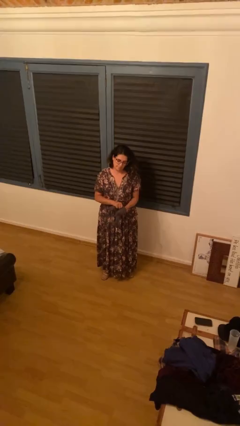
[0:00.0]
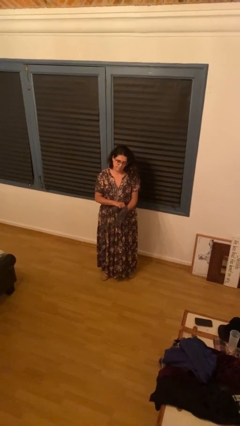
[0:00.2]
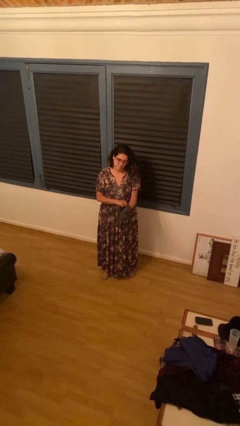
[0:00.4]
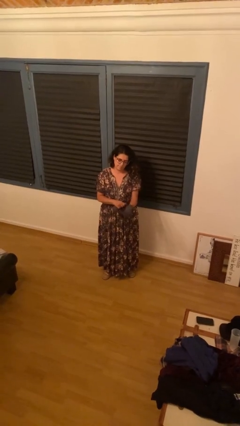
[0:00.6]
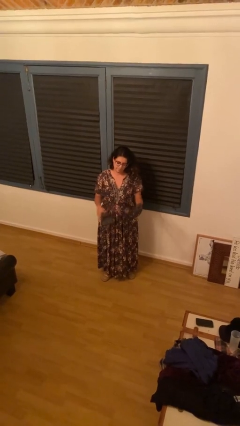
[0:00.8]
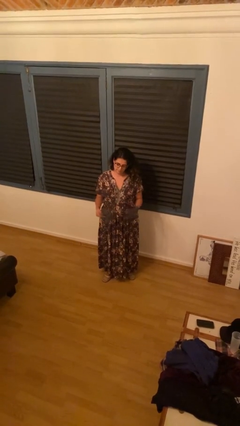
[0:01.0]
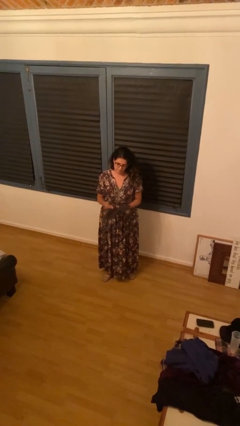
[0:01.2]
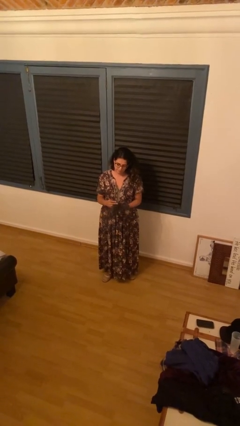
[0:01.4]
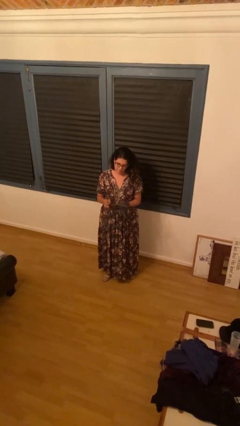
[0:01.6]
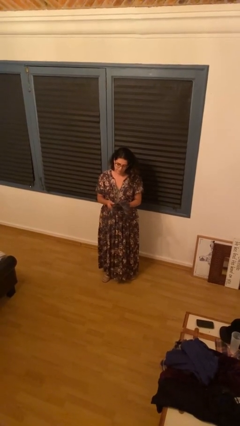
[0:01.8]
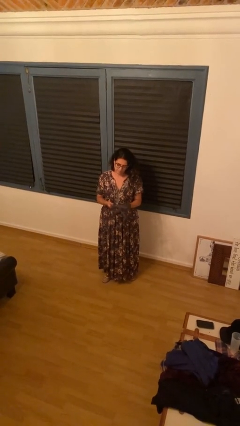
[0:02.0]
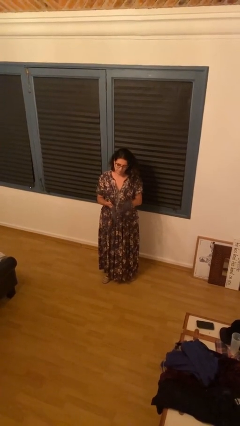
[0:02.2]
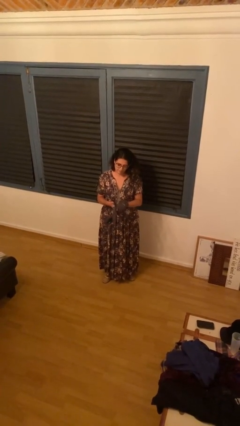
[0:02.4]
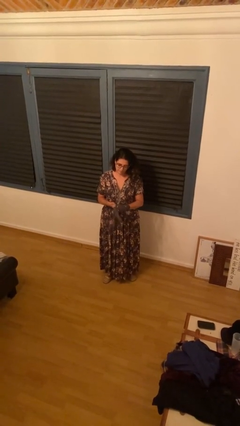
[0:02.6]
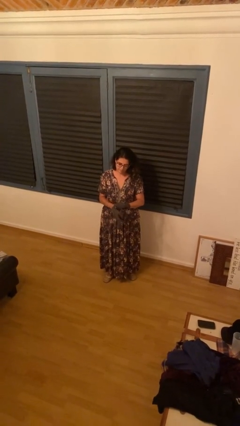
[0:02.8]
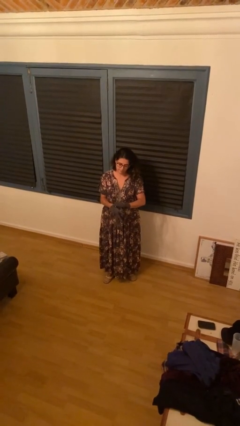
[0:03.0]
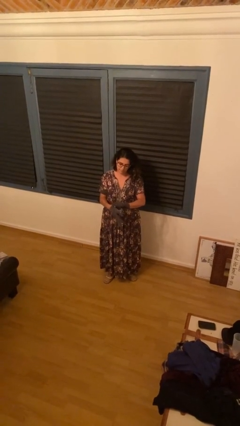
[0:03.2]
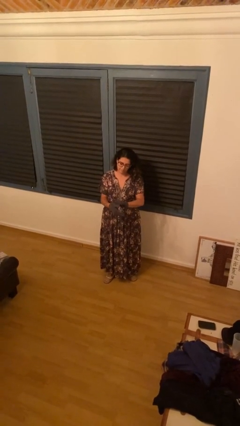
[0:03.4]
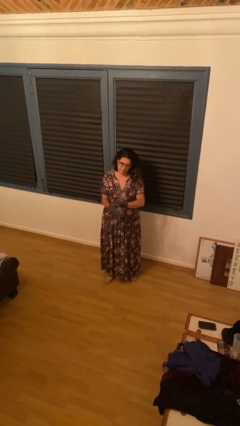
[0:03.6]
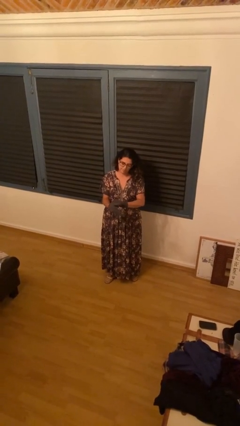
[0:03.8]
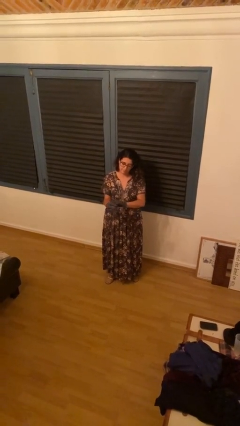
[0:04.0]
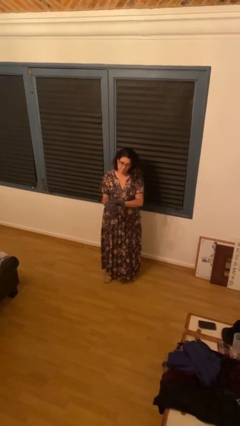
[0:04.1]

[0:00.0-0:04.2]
person puts on gloves

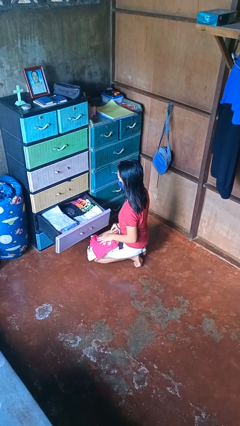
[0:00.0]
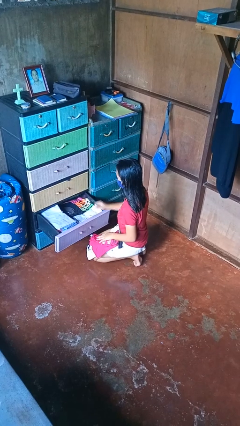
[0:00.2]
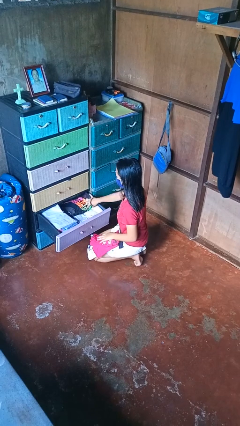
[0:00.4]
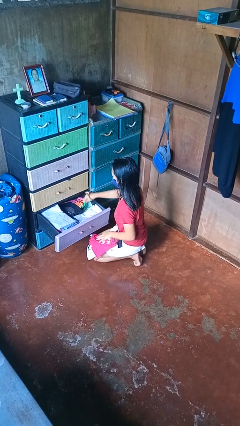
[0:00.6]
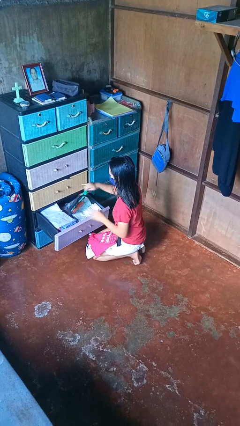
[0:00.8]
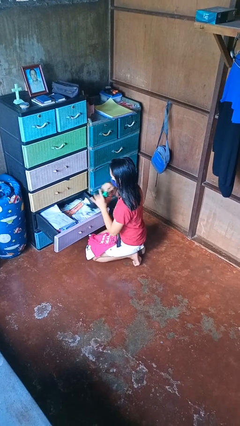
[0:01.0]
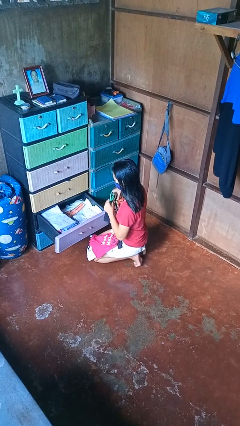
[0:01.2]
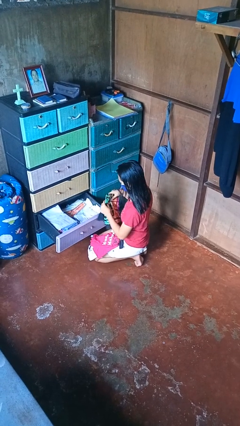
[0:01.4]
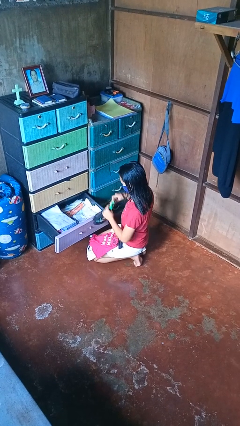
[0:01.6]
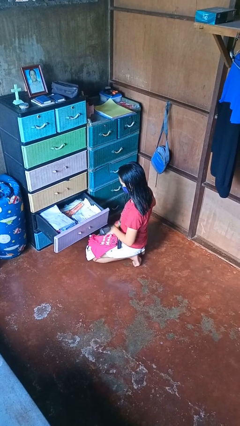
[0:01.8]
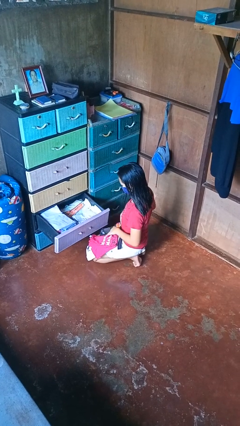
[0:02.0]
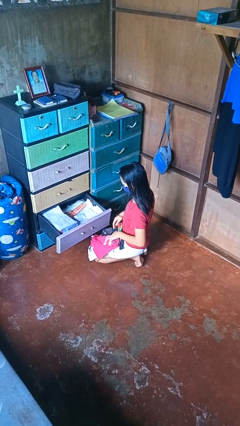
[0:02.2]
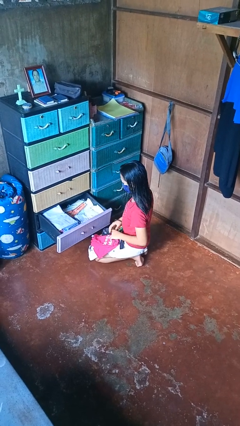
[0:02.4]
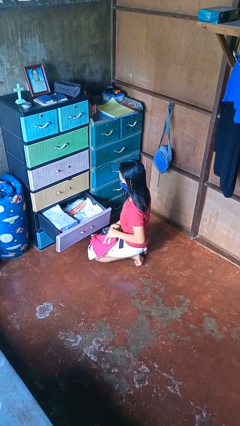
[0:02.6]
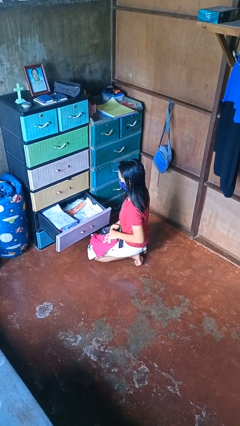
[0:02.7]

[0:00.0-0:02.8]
person takes clothes from dresser

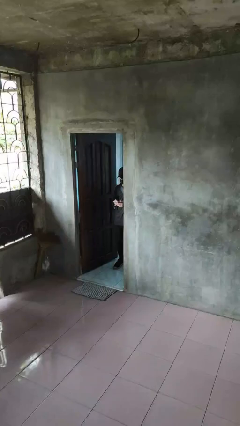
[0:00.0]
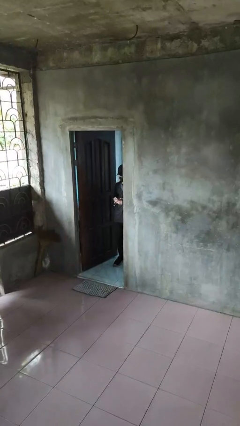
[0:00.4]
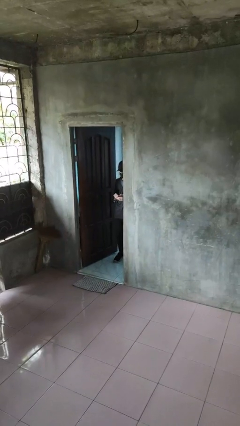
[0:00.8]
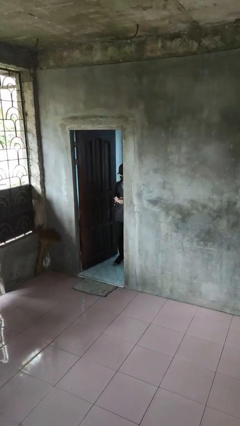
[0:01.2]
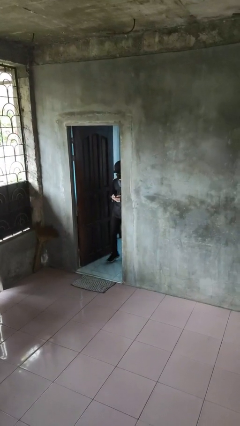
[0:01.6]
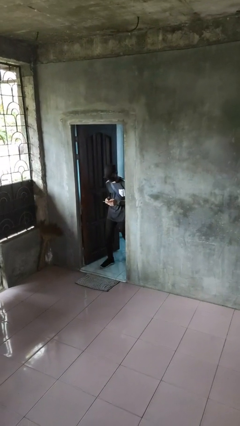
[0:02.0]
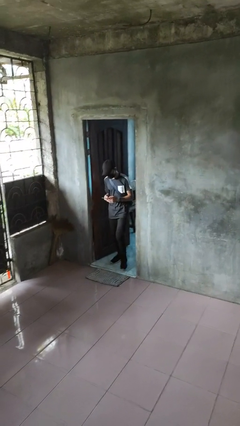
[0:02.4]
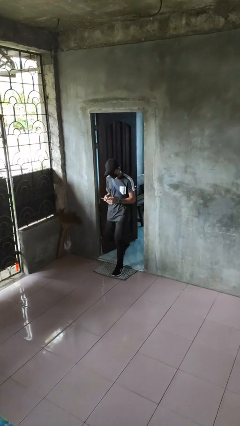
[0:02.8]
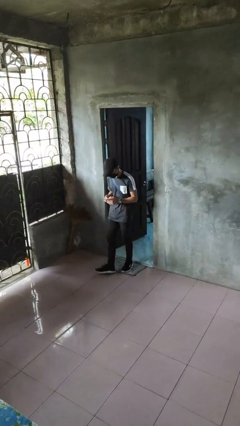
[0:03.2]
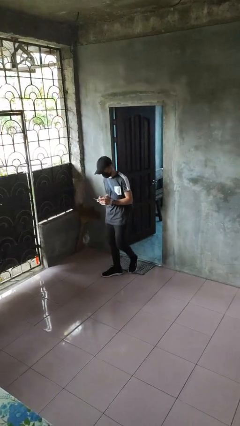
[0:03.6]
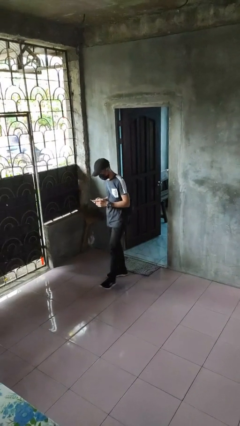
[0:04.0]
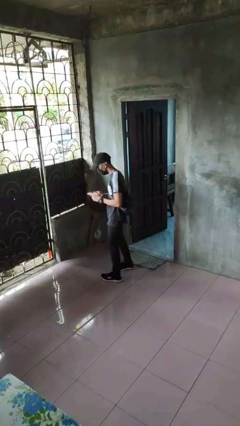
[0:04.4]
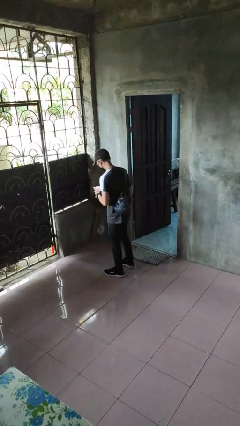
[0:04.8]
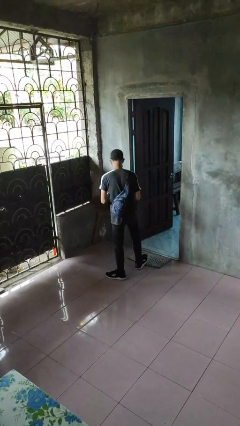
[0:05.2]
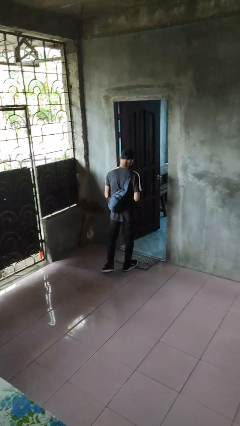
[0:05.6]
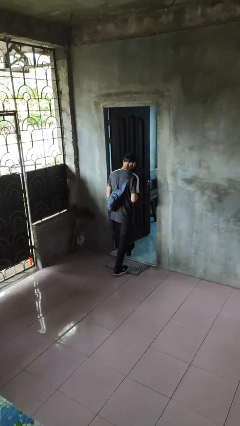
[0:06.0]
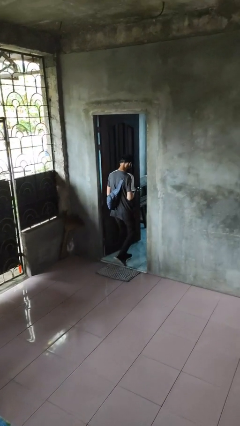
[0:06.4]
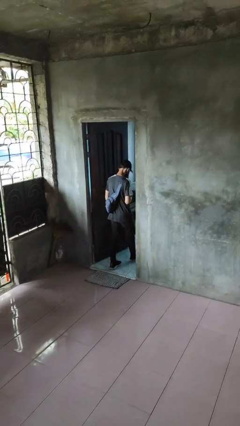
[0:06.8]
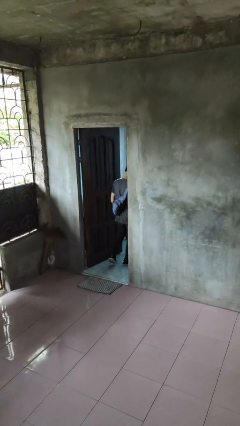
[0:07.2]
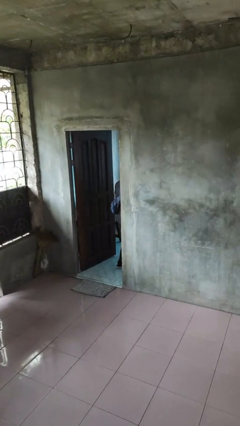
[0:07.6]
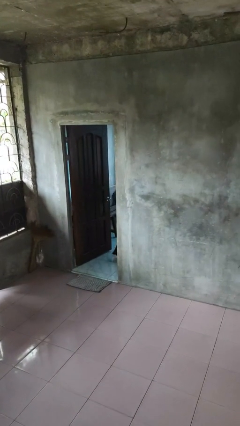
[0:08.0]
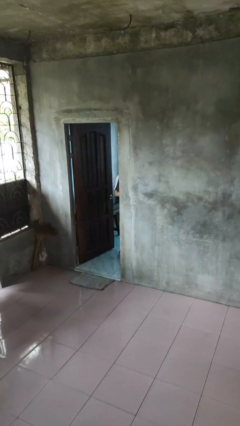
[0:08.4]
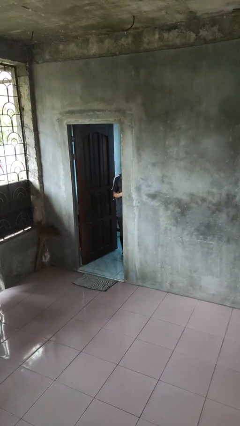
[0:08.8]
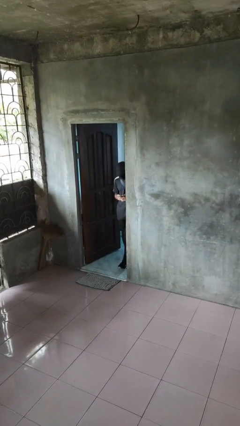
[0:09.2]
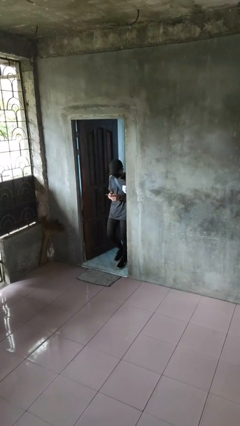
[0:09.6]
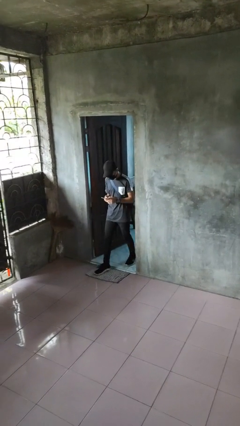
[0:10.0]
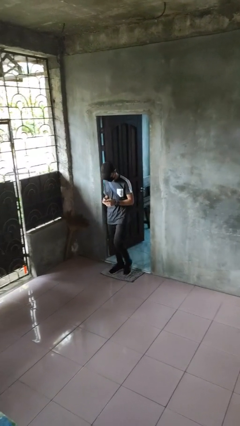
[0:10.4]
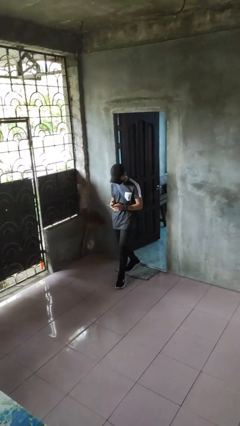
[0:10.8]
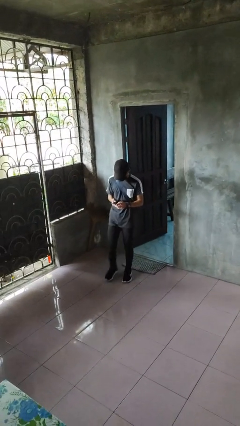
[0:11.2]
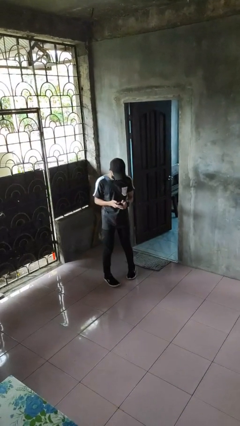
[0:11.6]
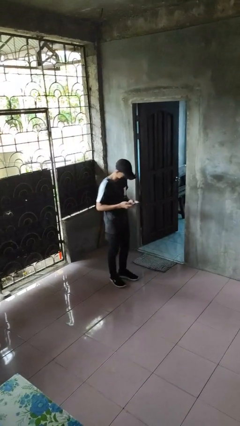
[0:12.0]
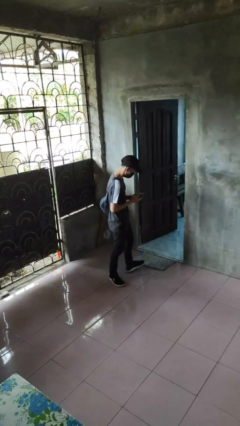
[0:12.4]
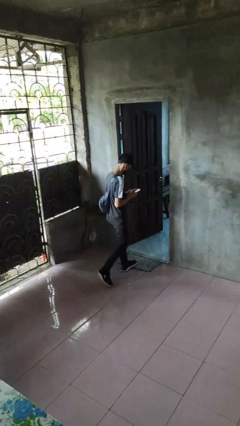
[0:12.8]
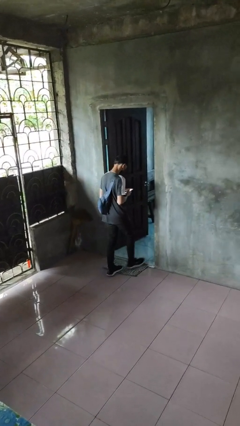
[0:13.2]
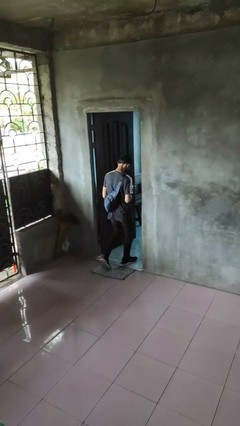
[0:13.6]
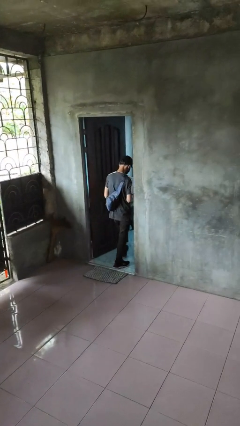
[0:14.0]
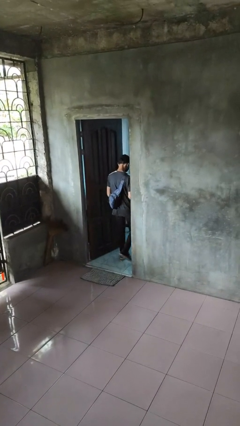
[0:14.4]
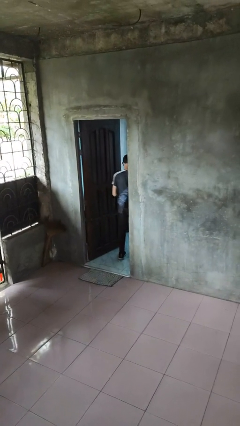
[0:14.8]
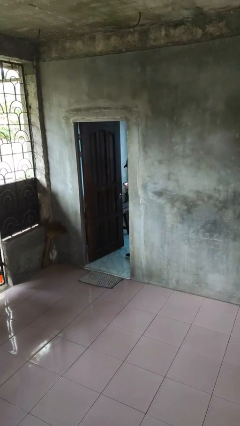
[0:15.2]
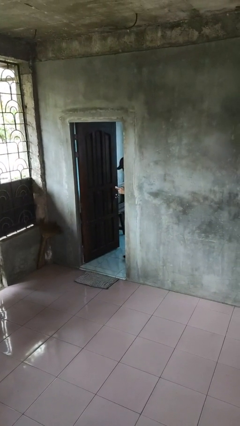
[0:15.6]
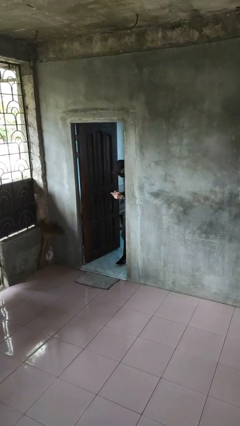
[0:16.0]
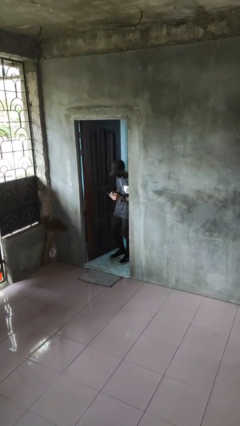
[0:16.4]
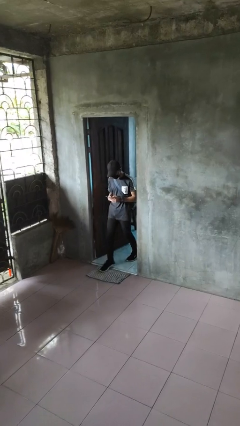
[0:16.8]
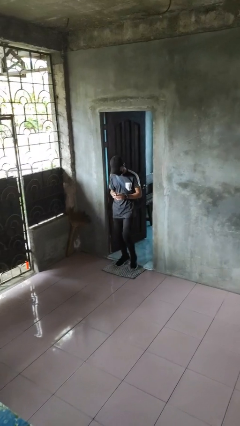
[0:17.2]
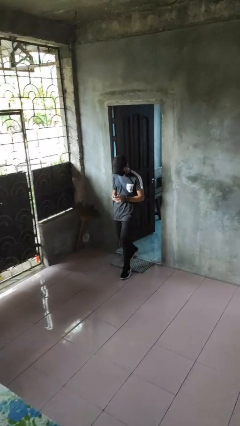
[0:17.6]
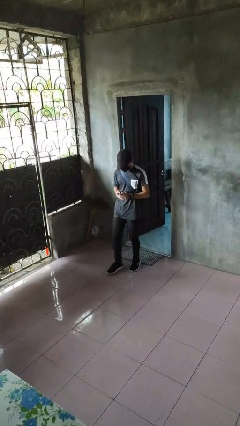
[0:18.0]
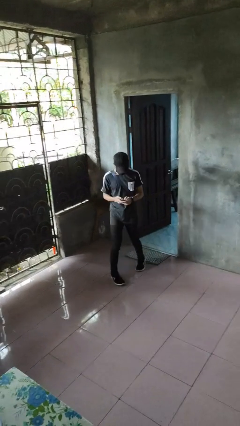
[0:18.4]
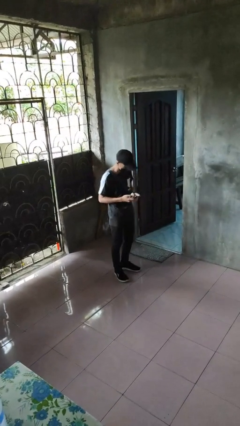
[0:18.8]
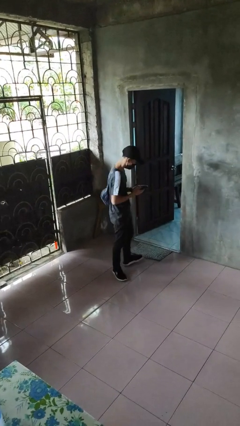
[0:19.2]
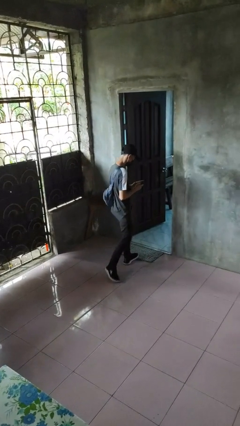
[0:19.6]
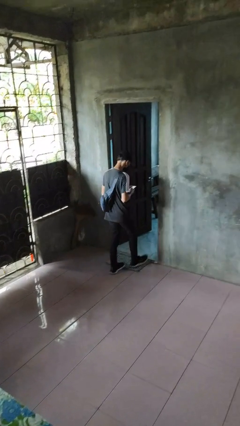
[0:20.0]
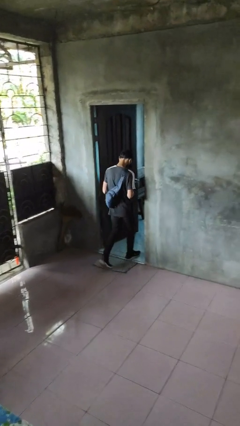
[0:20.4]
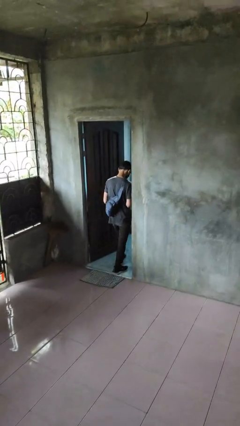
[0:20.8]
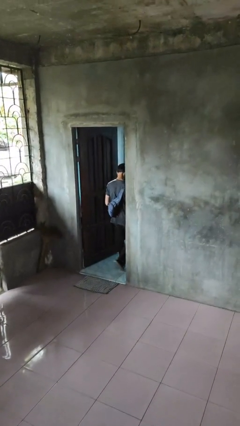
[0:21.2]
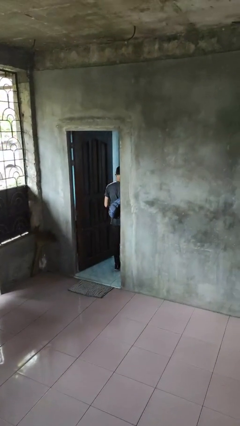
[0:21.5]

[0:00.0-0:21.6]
person texts on phone

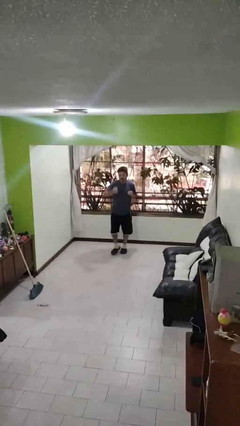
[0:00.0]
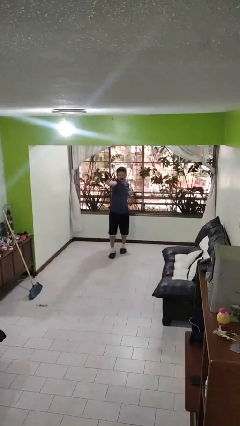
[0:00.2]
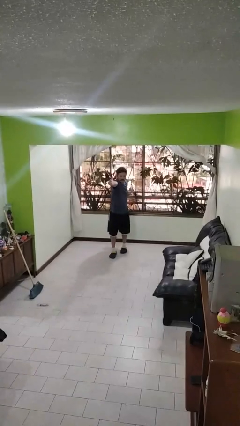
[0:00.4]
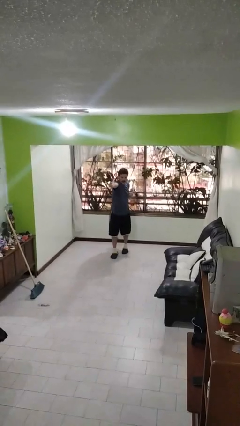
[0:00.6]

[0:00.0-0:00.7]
person punches
